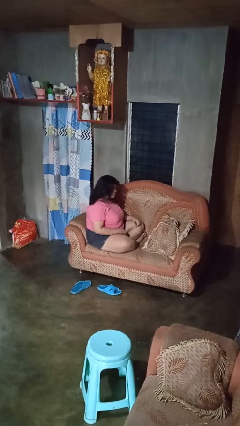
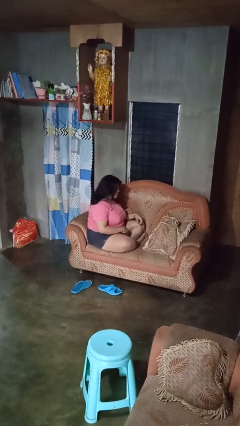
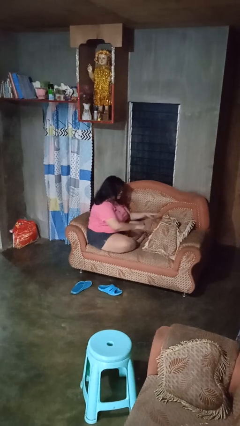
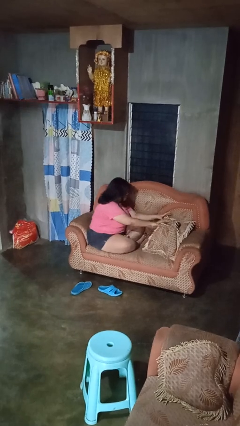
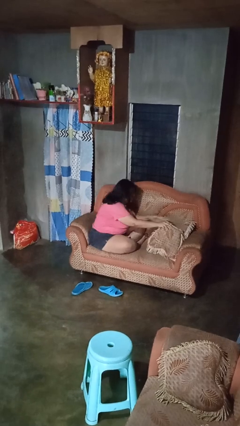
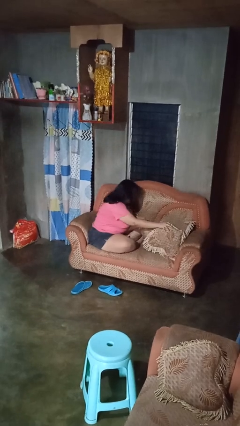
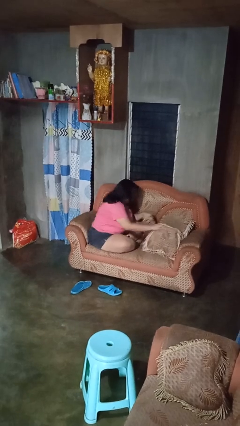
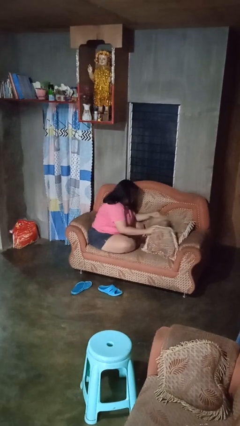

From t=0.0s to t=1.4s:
person searches in couch

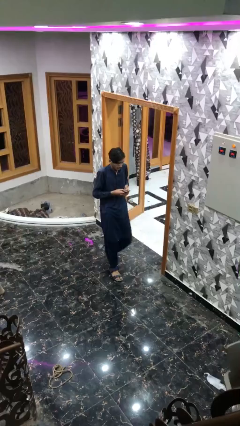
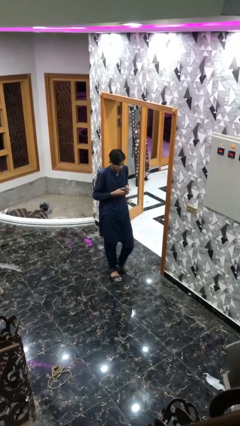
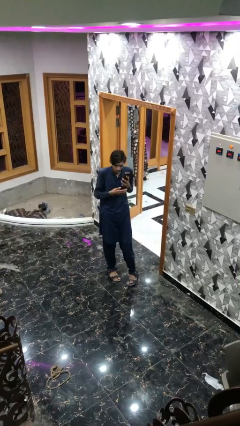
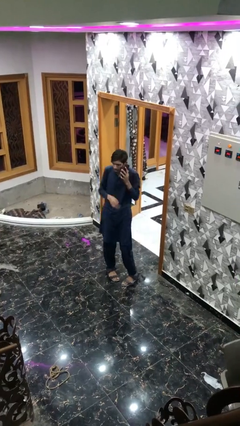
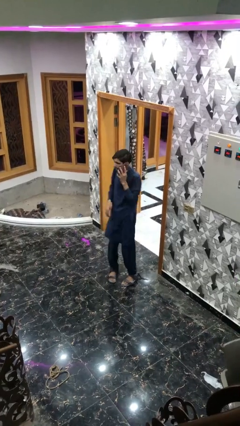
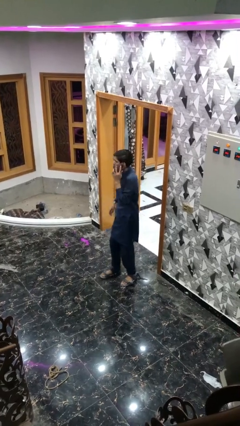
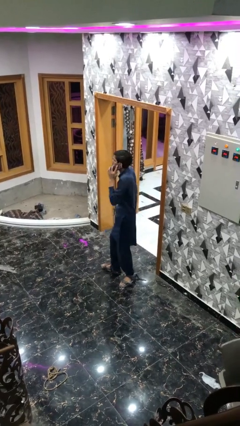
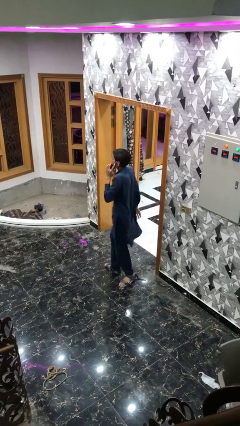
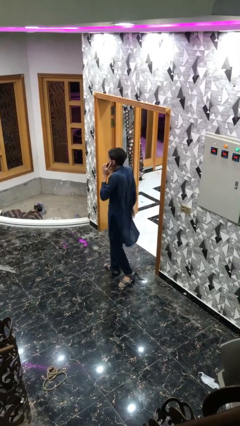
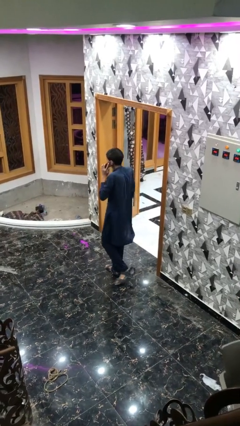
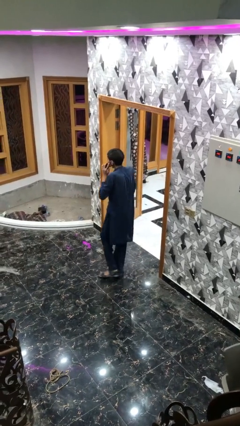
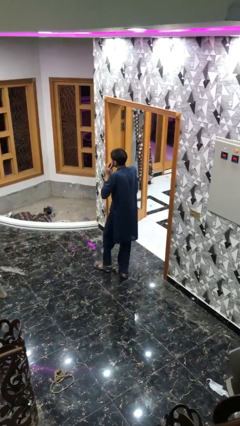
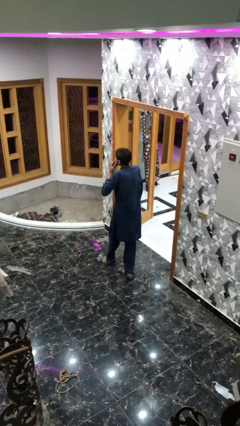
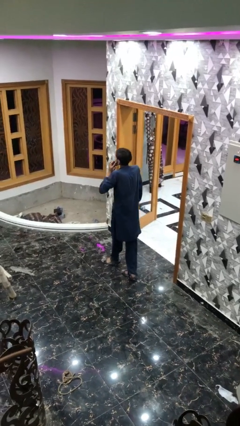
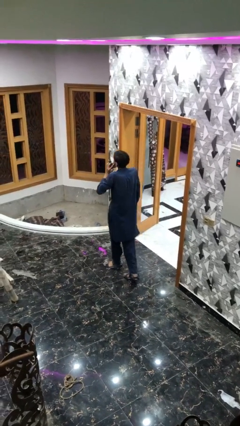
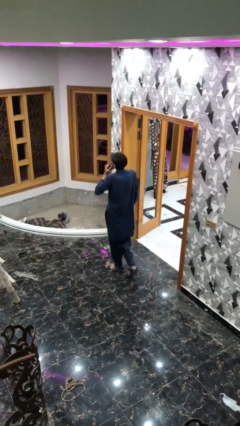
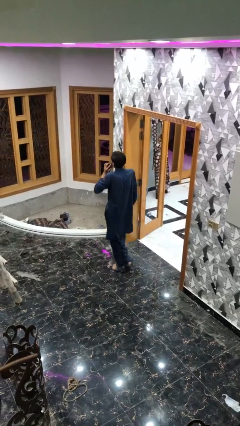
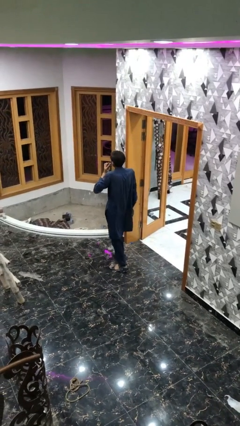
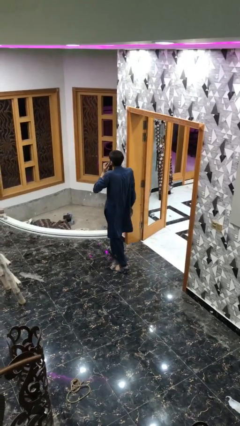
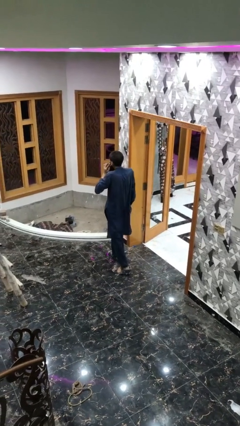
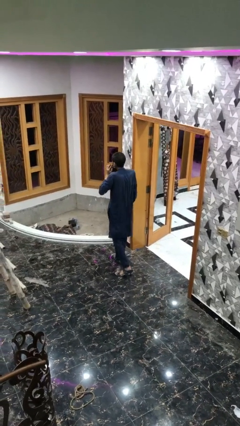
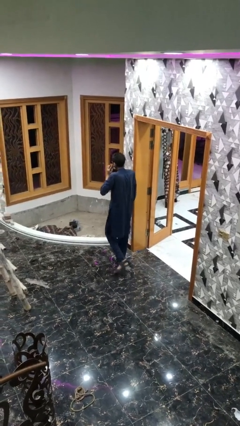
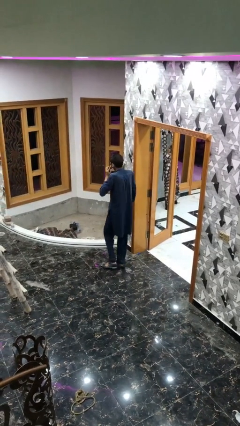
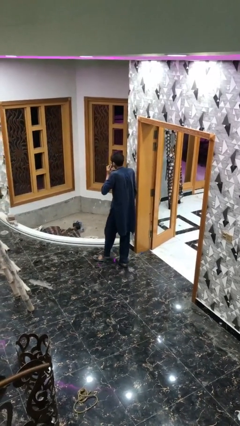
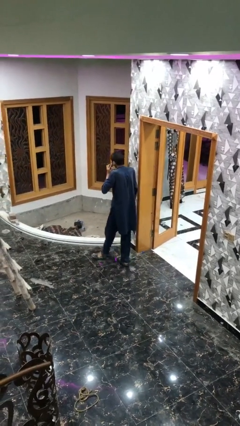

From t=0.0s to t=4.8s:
person talks on phone

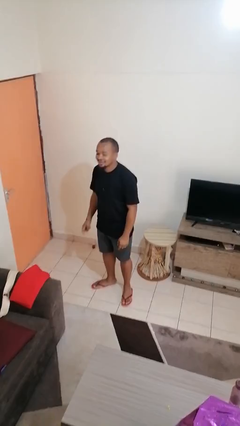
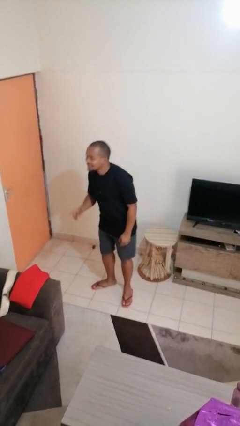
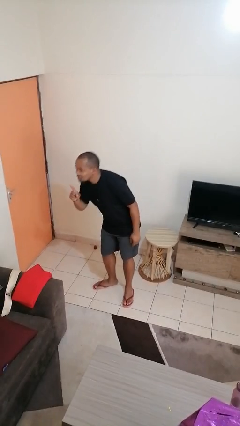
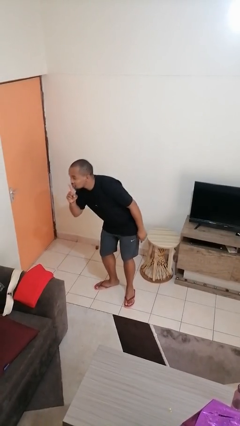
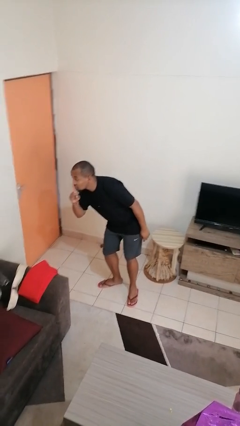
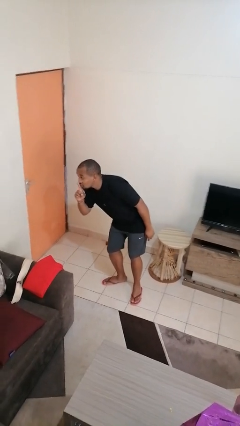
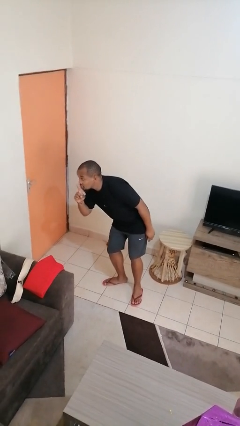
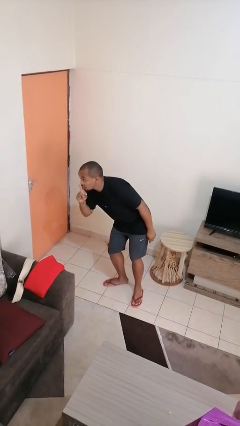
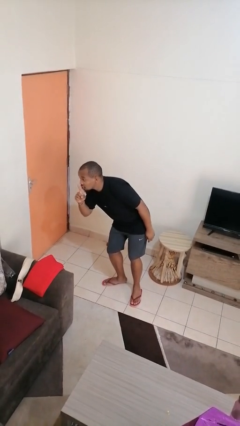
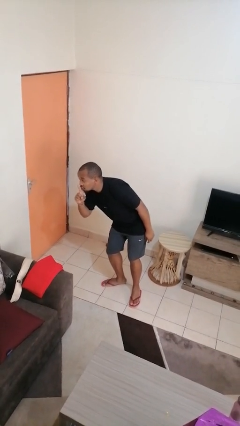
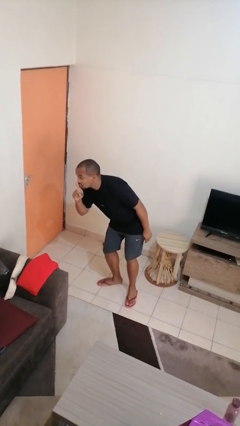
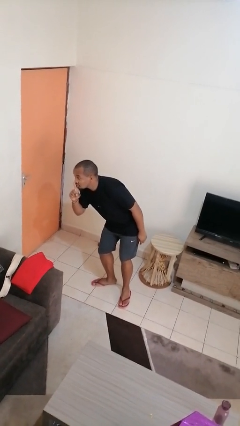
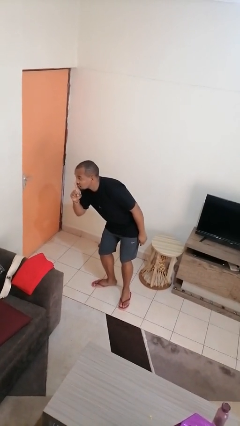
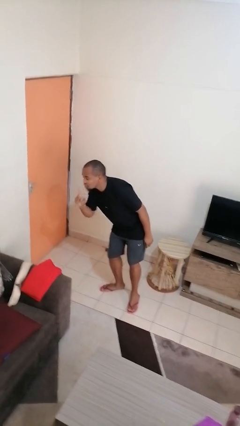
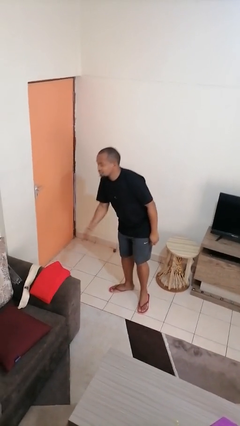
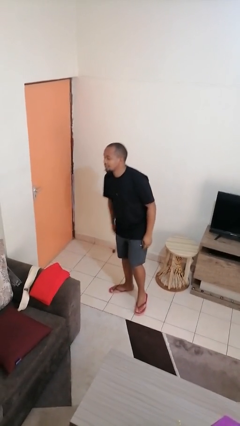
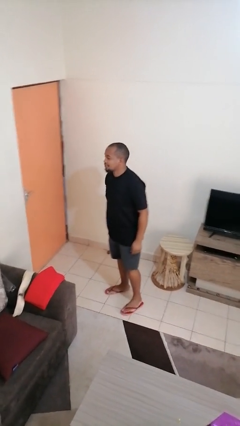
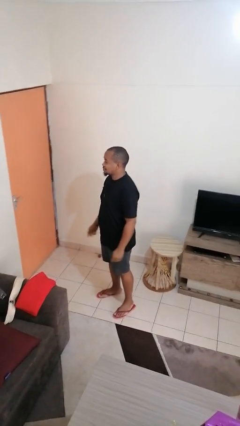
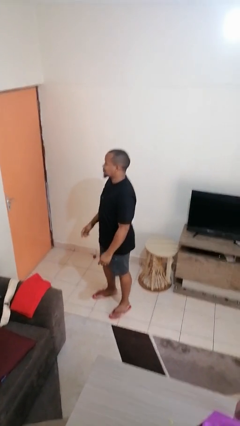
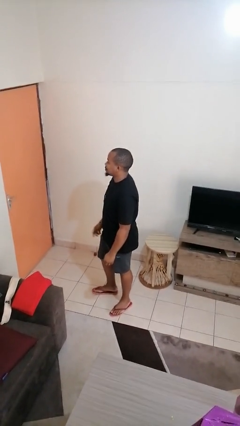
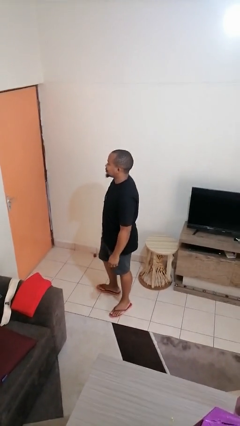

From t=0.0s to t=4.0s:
person gestures be quiet

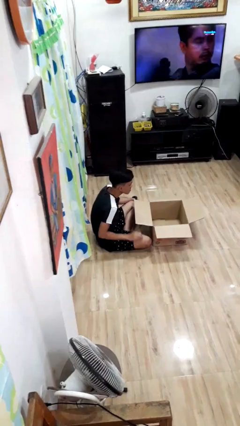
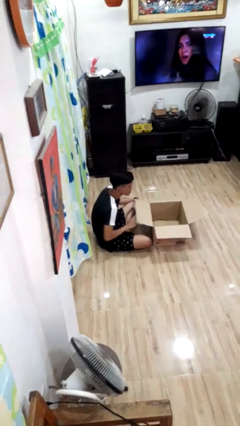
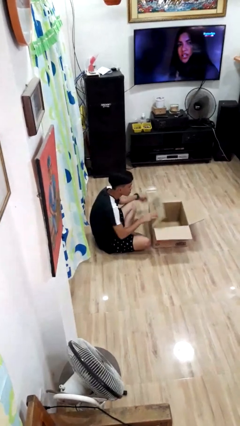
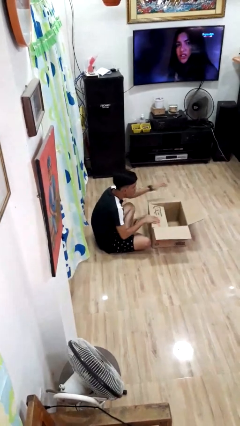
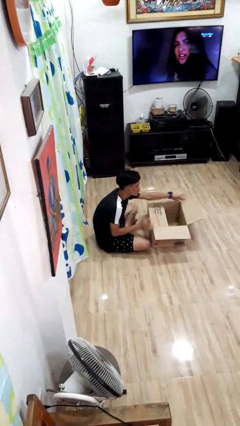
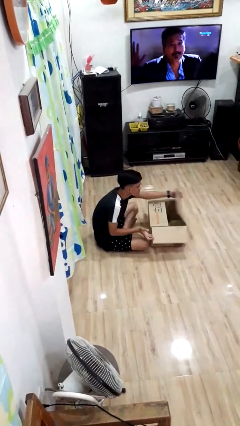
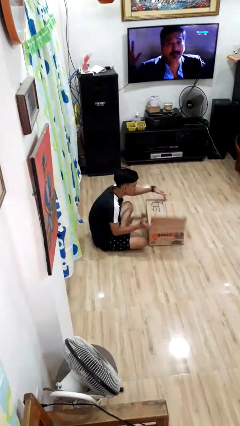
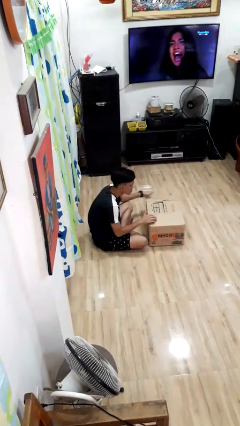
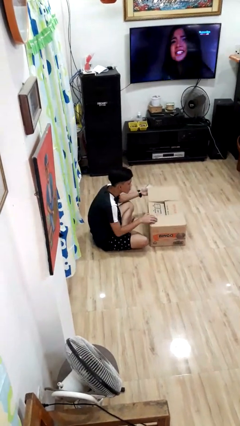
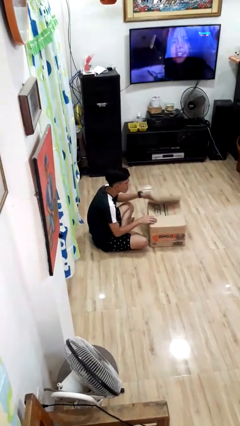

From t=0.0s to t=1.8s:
person closes box

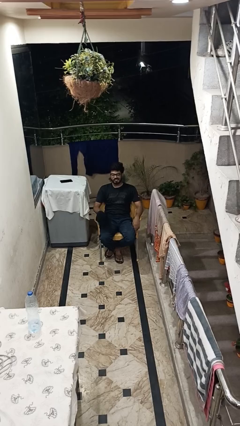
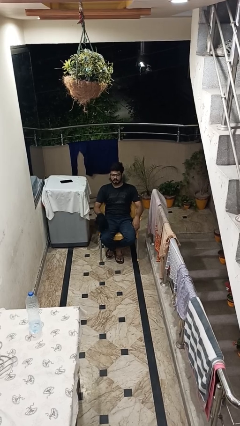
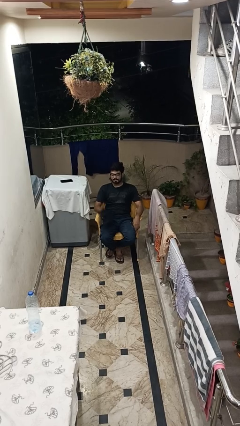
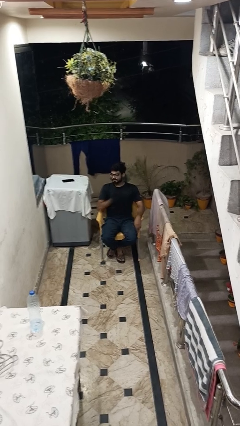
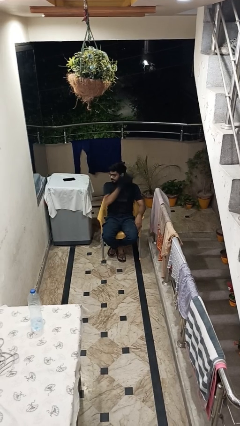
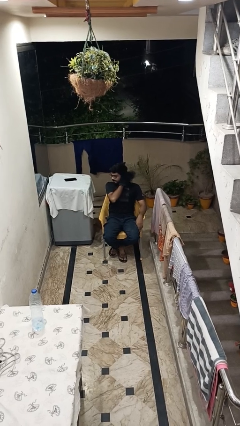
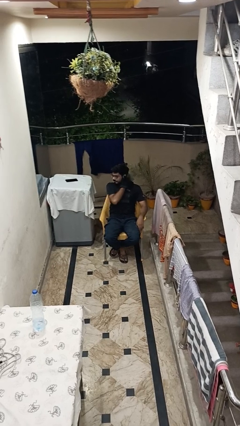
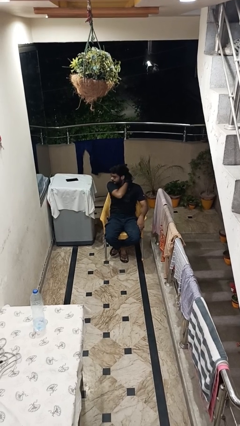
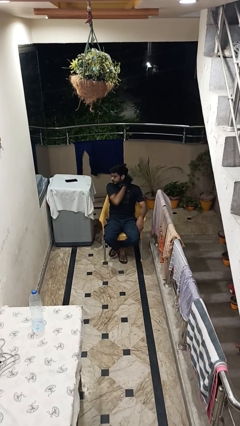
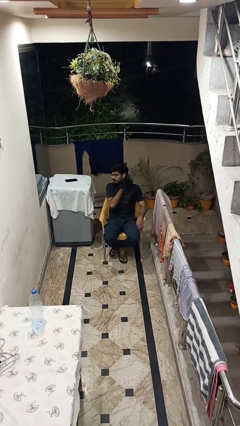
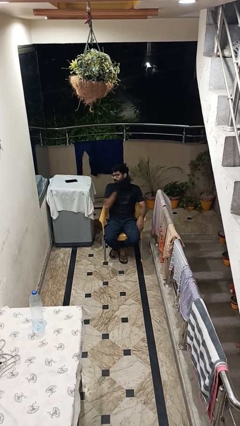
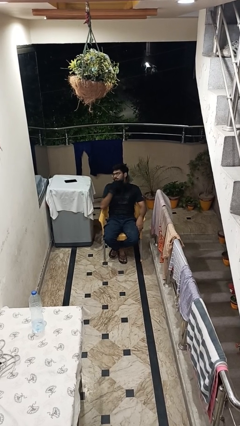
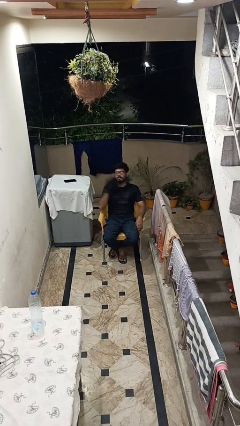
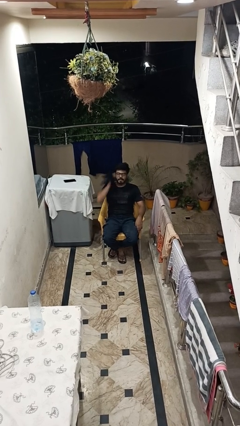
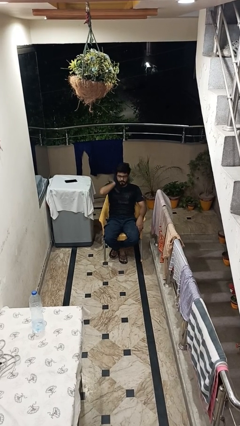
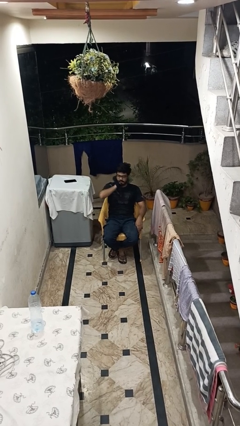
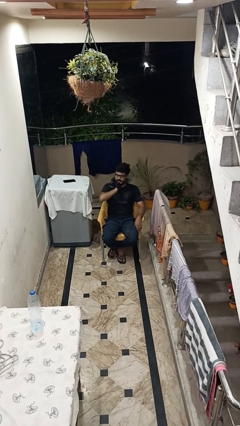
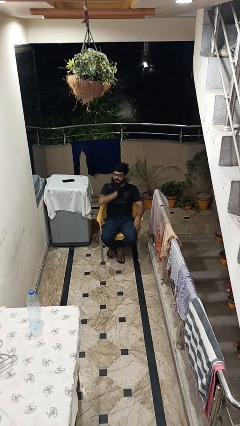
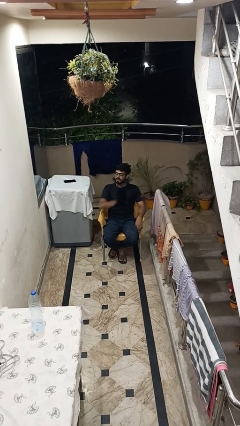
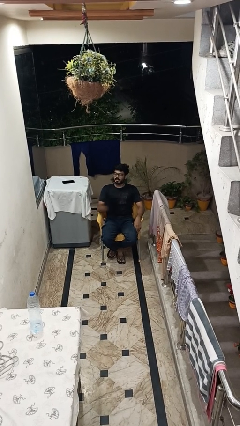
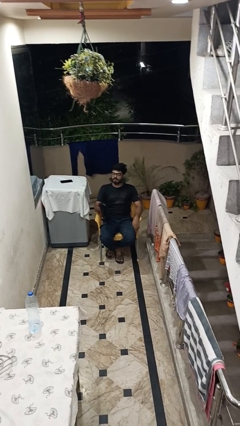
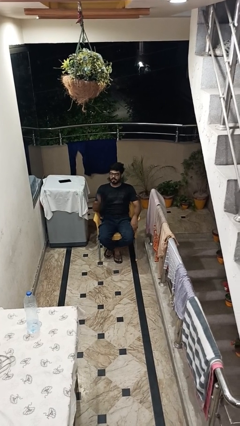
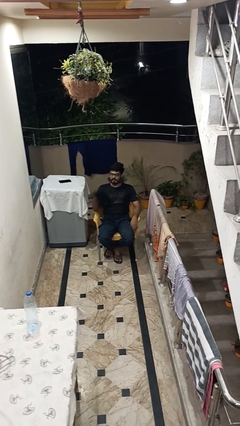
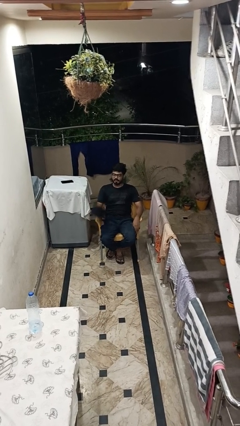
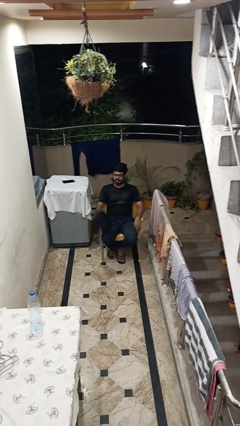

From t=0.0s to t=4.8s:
person wipes mouth with napkin

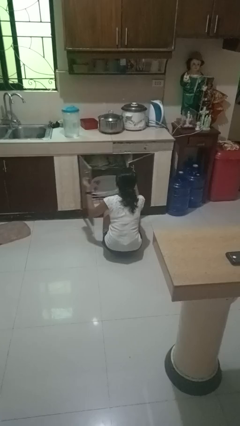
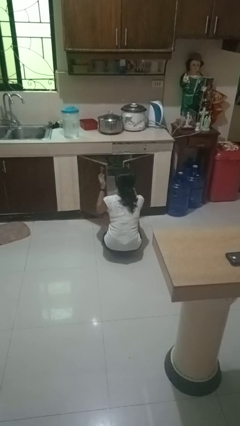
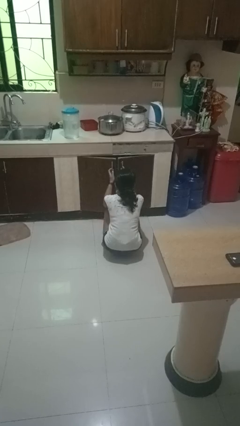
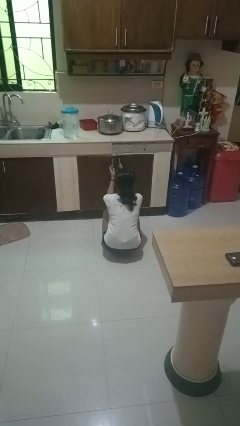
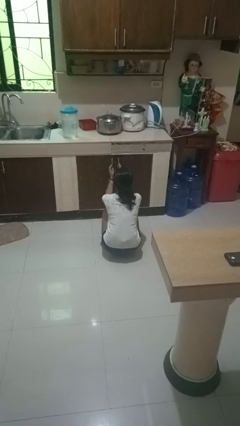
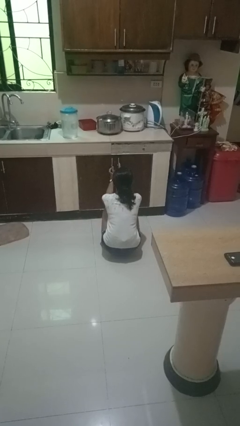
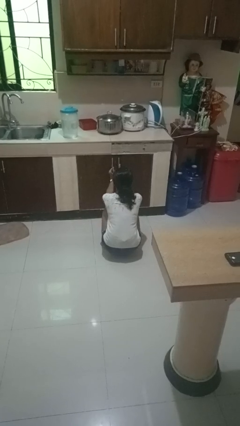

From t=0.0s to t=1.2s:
person closes dishwasher
